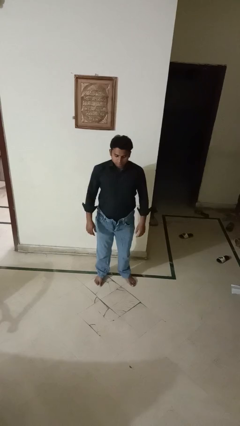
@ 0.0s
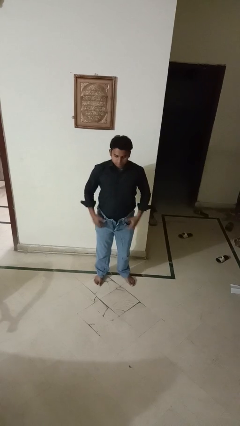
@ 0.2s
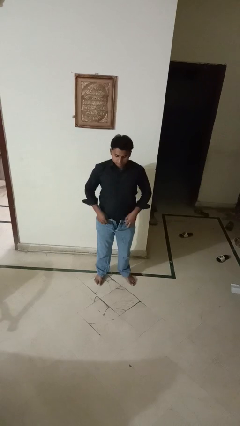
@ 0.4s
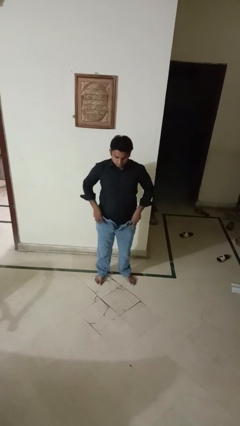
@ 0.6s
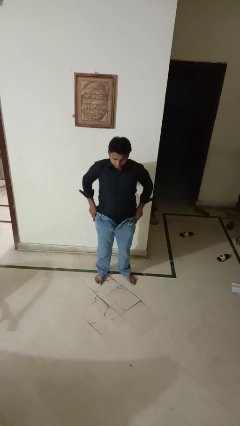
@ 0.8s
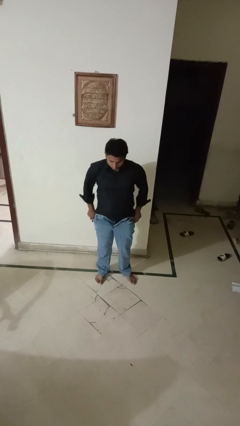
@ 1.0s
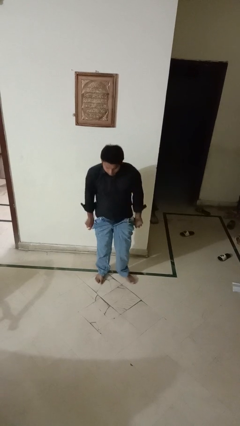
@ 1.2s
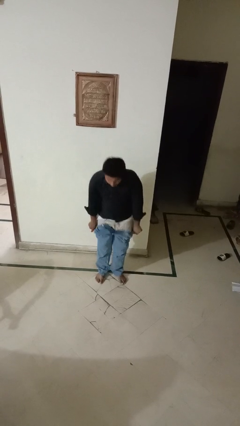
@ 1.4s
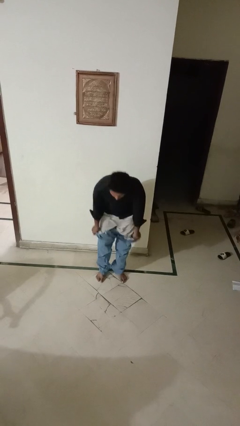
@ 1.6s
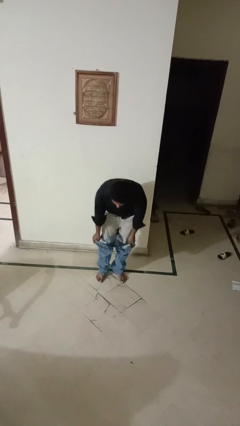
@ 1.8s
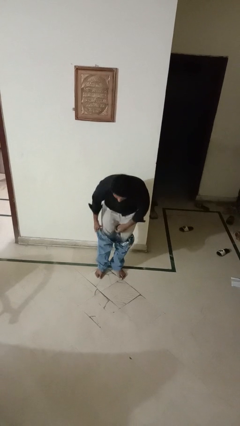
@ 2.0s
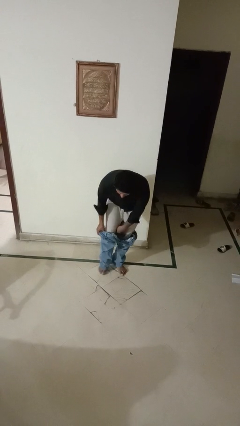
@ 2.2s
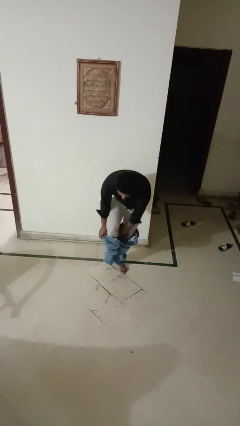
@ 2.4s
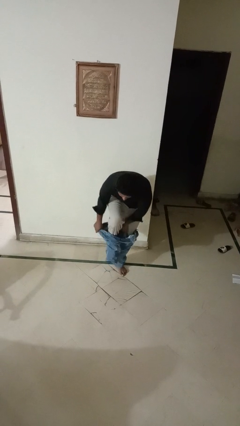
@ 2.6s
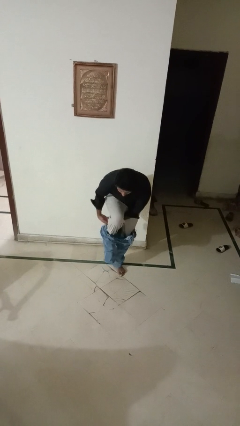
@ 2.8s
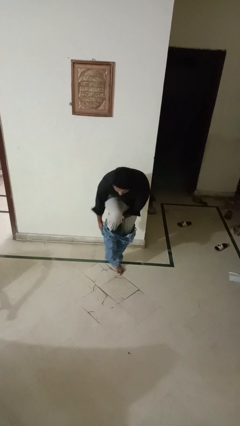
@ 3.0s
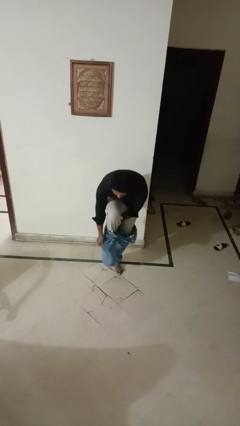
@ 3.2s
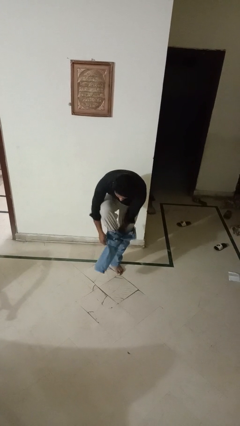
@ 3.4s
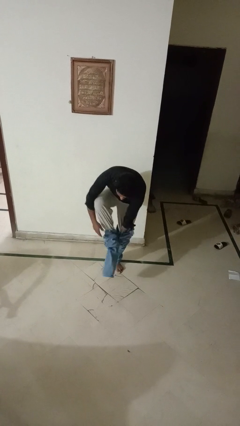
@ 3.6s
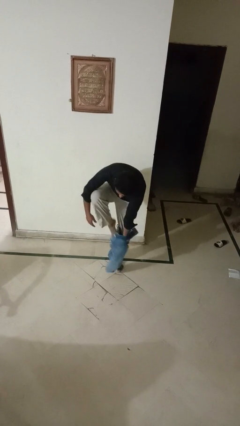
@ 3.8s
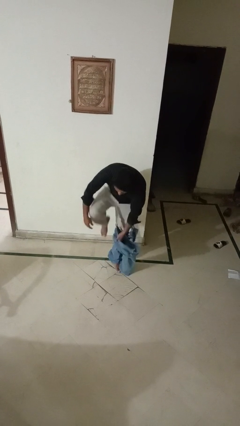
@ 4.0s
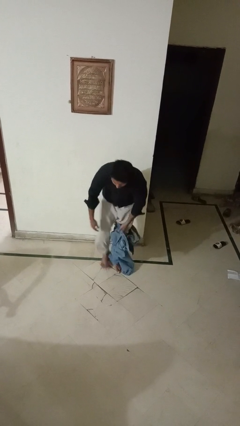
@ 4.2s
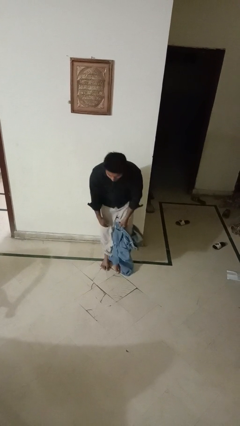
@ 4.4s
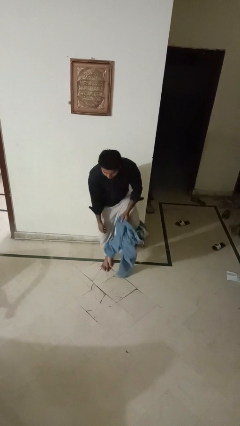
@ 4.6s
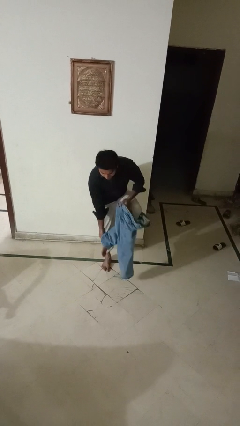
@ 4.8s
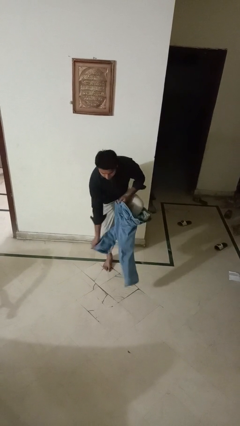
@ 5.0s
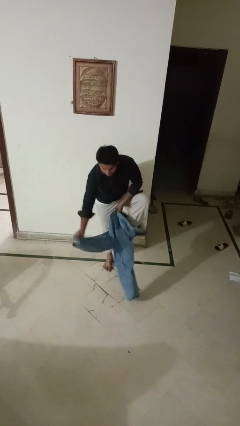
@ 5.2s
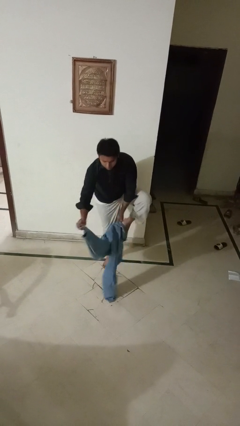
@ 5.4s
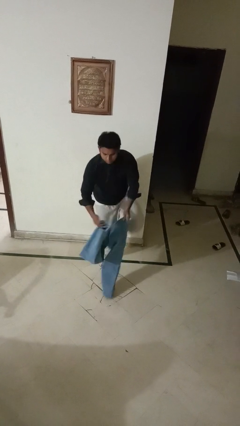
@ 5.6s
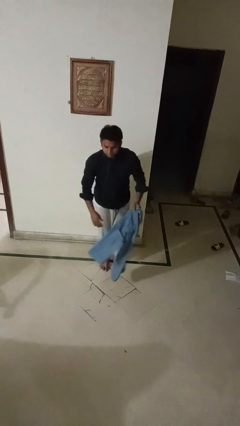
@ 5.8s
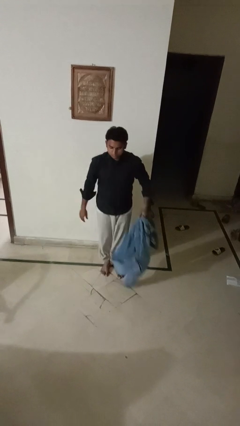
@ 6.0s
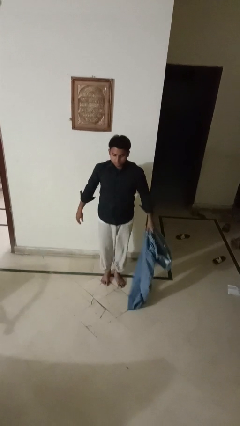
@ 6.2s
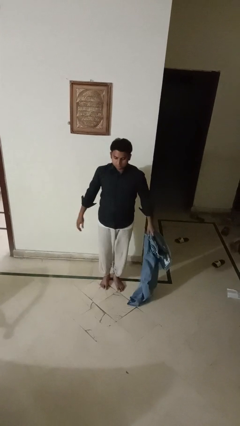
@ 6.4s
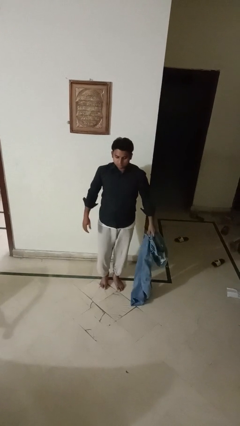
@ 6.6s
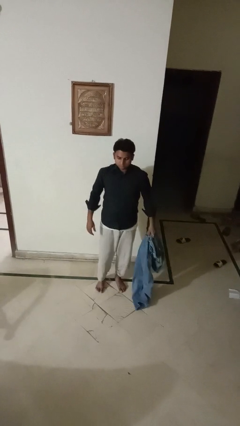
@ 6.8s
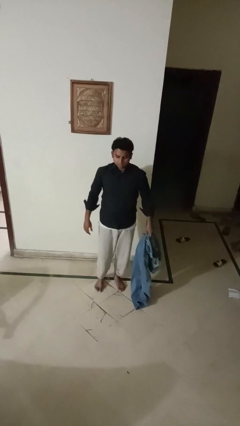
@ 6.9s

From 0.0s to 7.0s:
person takes off pants

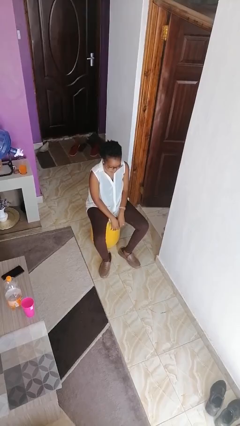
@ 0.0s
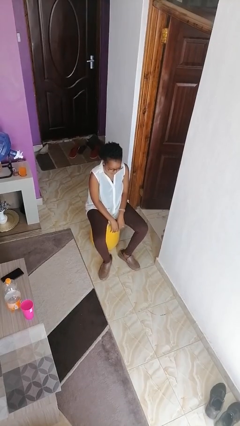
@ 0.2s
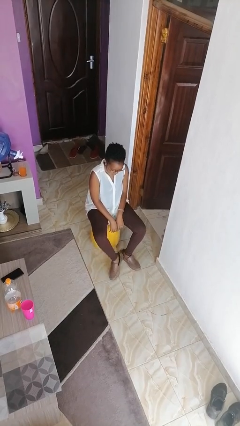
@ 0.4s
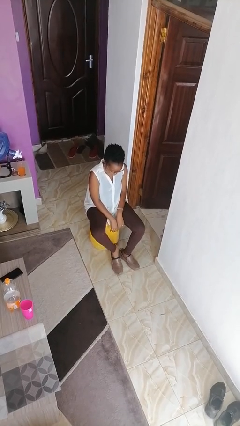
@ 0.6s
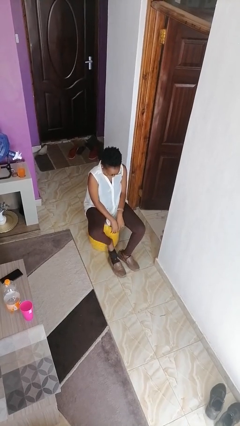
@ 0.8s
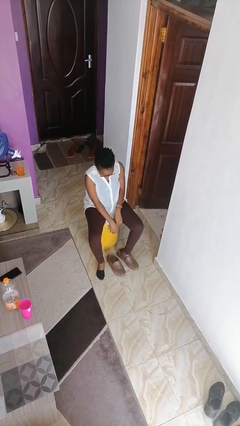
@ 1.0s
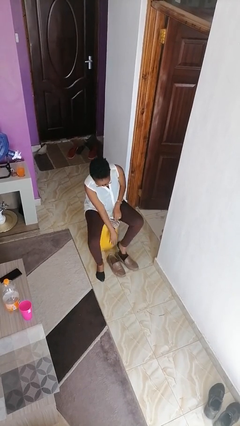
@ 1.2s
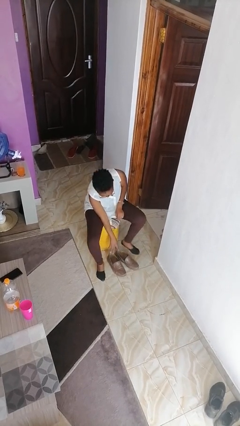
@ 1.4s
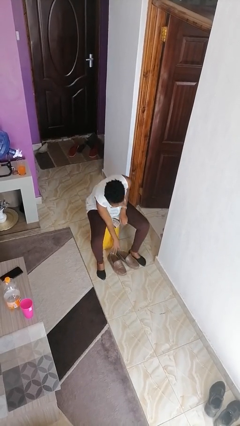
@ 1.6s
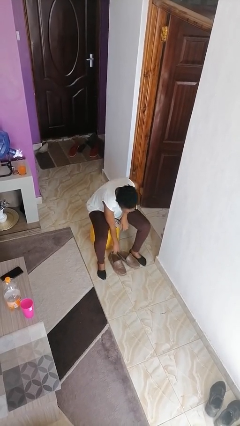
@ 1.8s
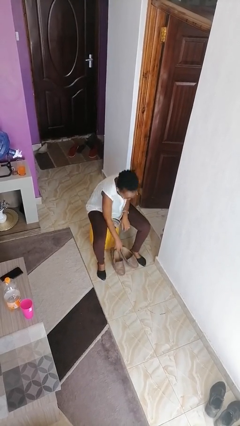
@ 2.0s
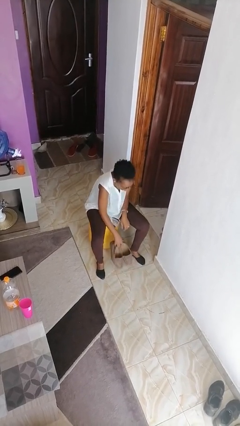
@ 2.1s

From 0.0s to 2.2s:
person takes off shoes

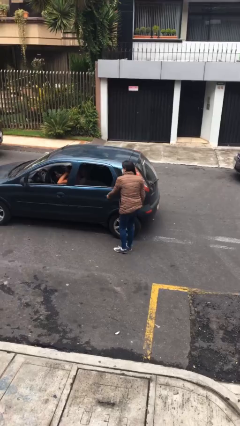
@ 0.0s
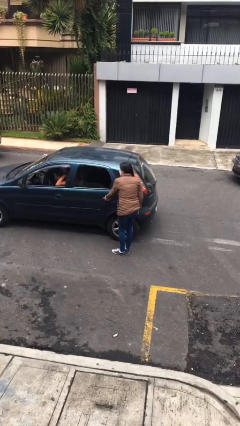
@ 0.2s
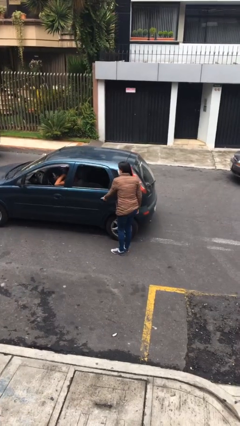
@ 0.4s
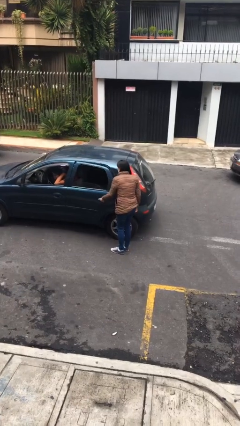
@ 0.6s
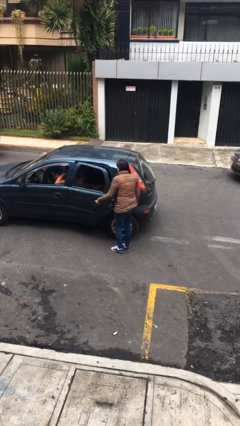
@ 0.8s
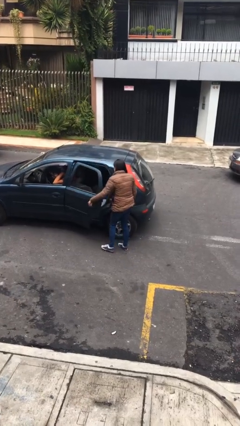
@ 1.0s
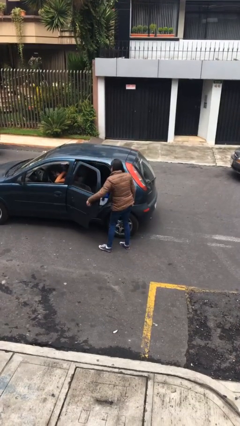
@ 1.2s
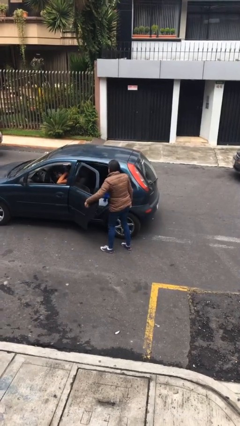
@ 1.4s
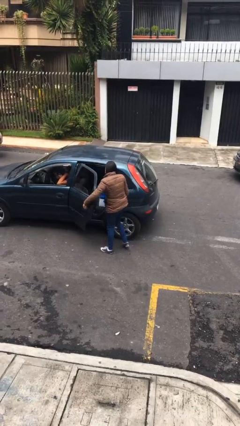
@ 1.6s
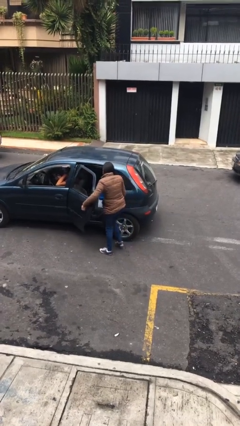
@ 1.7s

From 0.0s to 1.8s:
person opens car door

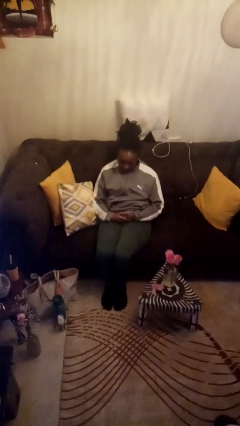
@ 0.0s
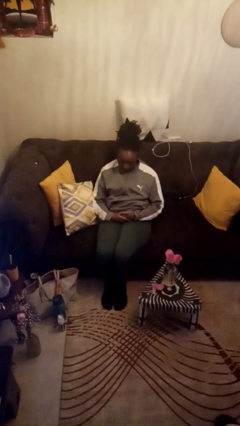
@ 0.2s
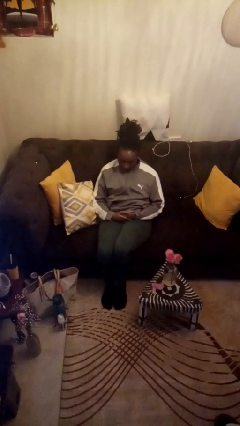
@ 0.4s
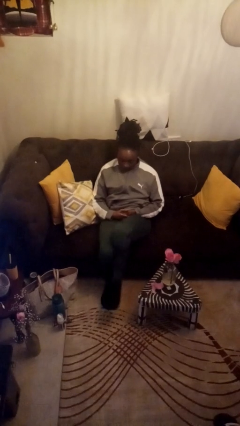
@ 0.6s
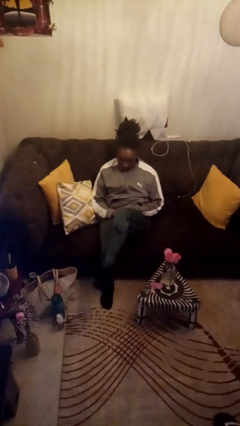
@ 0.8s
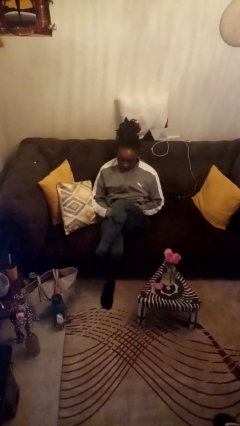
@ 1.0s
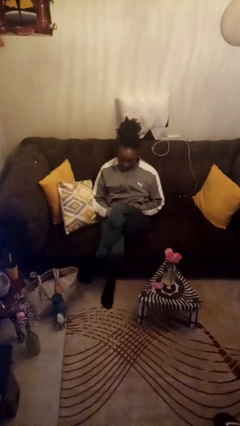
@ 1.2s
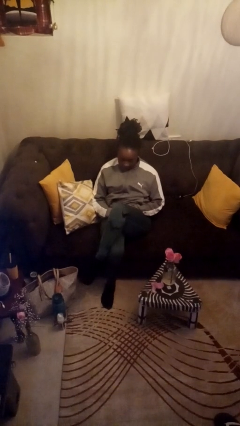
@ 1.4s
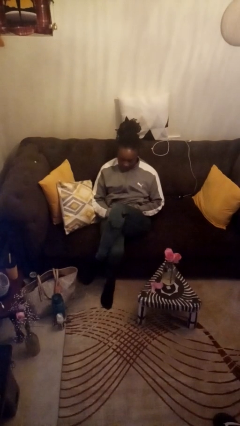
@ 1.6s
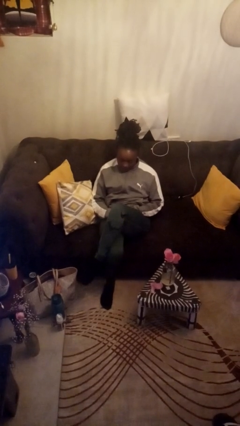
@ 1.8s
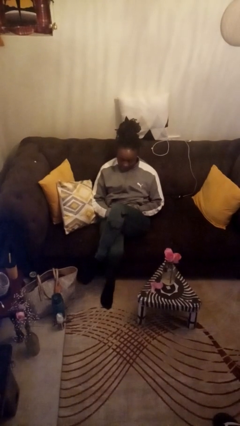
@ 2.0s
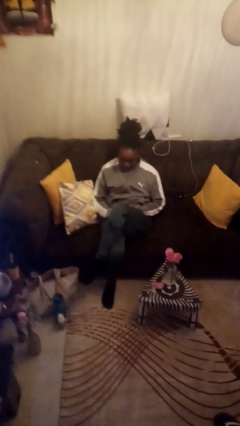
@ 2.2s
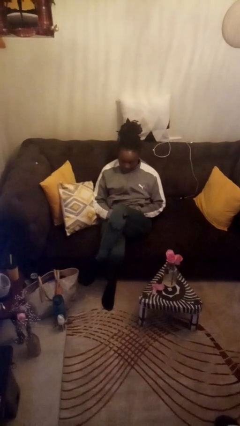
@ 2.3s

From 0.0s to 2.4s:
person crosses legs

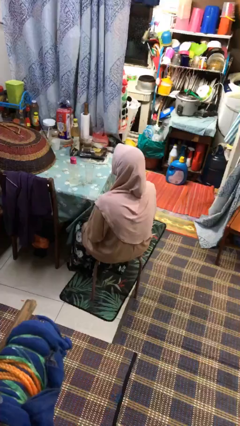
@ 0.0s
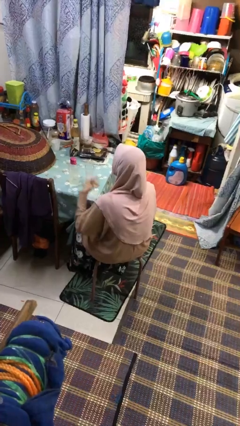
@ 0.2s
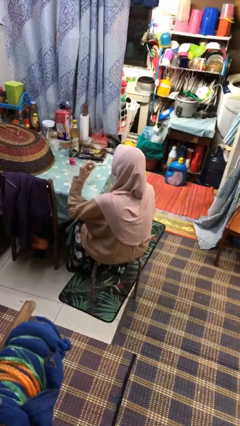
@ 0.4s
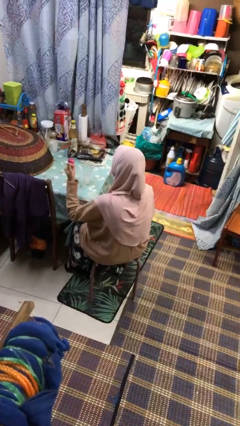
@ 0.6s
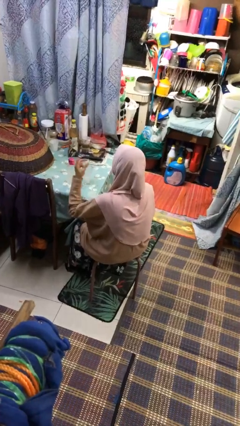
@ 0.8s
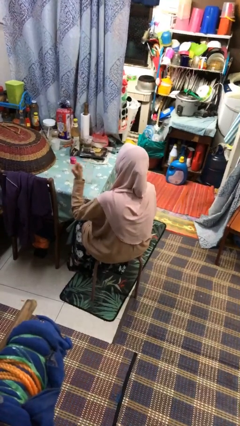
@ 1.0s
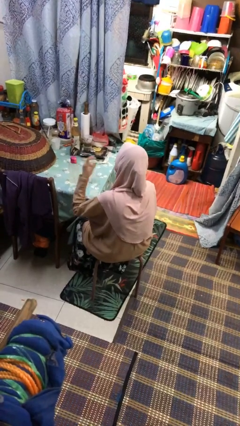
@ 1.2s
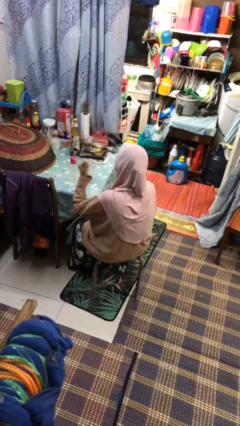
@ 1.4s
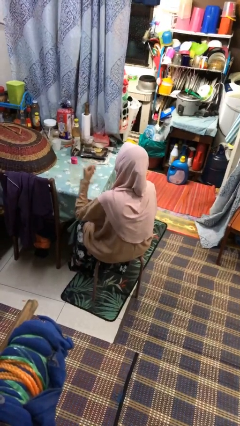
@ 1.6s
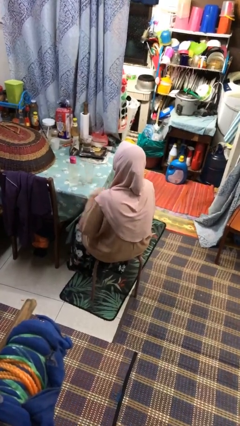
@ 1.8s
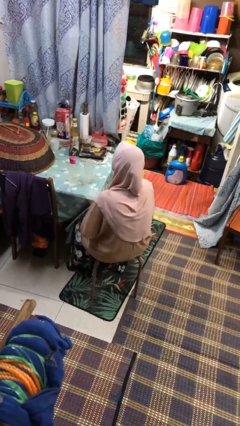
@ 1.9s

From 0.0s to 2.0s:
person snaps fingers

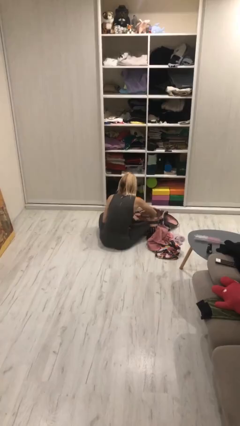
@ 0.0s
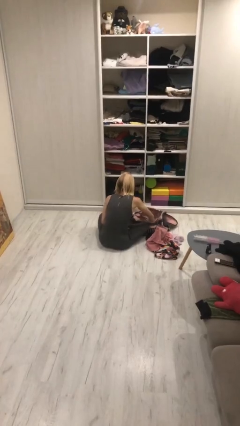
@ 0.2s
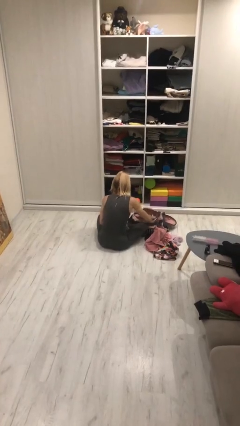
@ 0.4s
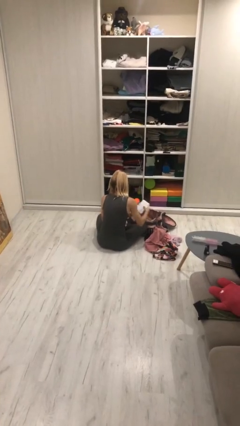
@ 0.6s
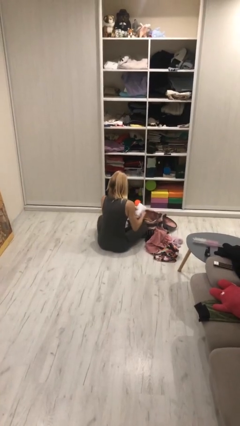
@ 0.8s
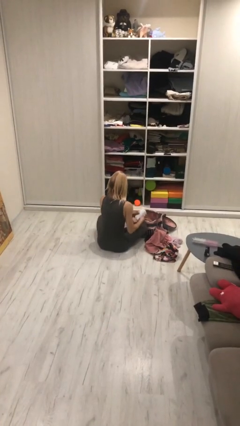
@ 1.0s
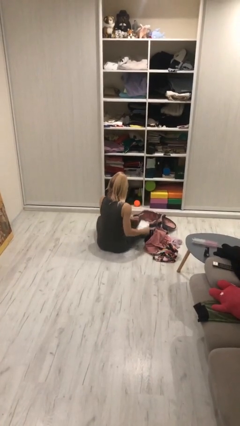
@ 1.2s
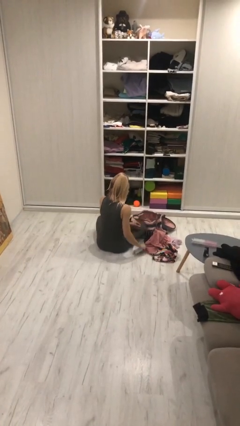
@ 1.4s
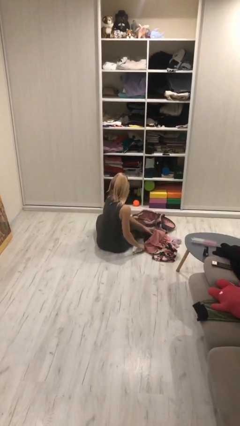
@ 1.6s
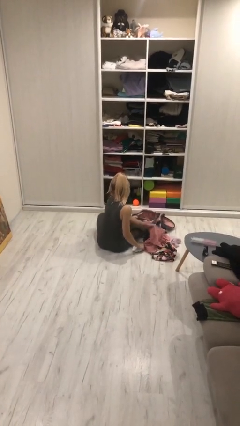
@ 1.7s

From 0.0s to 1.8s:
person unloads clothes from suitcase
